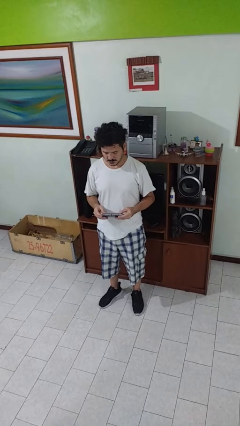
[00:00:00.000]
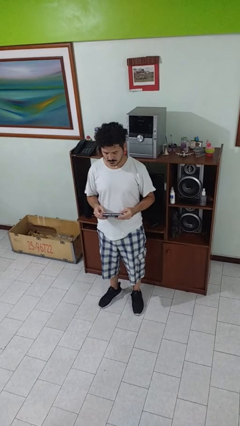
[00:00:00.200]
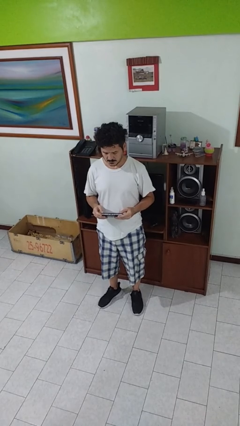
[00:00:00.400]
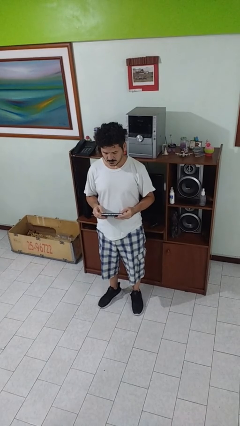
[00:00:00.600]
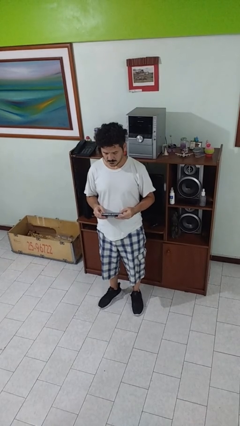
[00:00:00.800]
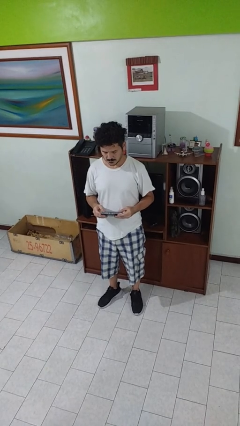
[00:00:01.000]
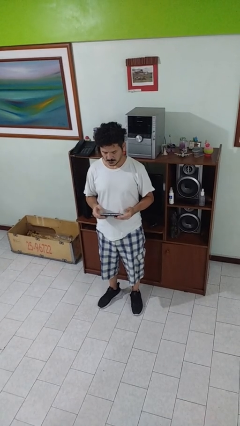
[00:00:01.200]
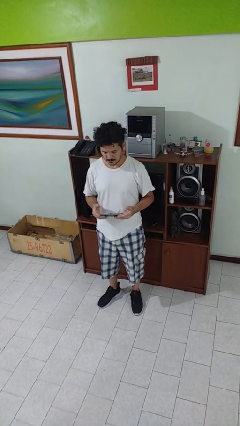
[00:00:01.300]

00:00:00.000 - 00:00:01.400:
person interacts with handheld game

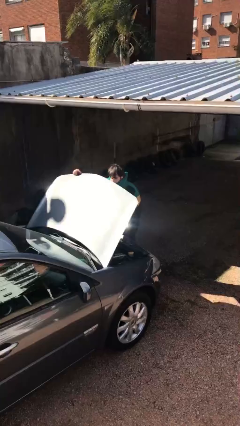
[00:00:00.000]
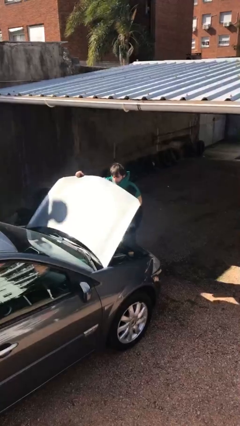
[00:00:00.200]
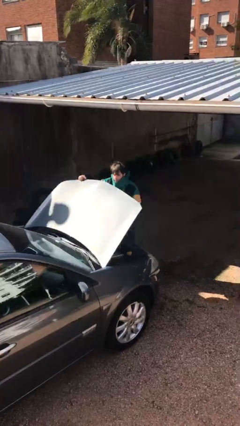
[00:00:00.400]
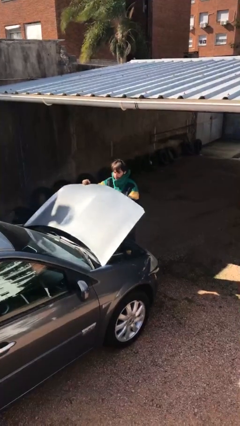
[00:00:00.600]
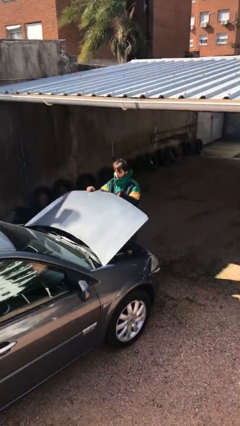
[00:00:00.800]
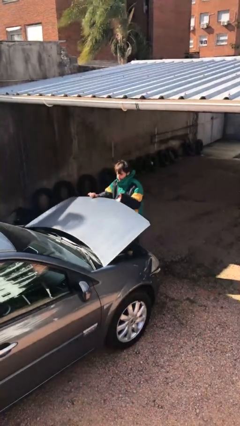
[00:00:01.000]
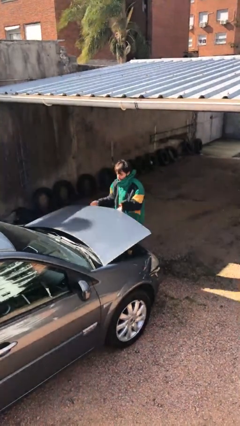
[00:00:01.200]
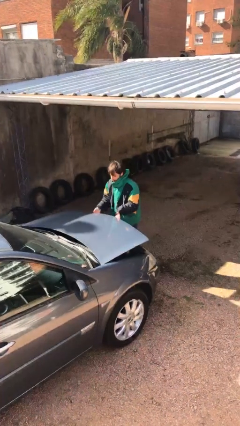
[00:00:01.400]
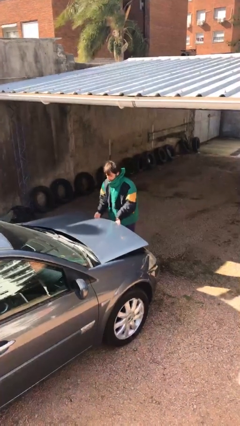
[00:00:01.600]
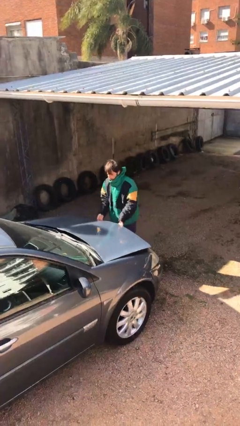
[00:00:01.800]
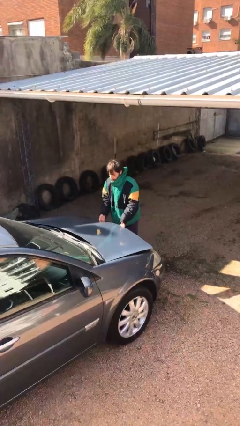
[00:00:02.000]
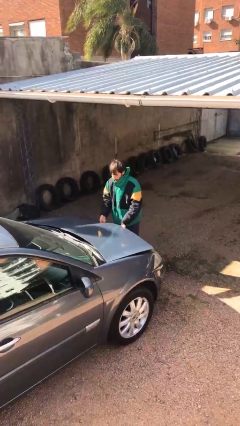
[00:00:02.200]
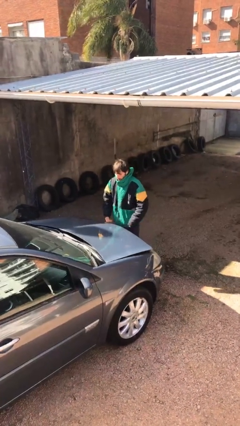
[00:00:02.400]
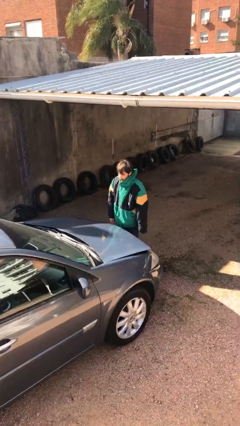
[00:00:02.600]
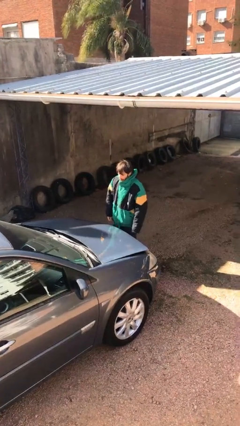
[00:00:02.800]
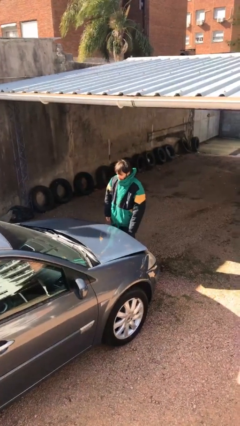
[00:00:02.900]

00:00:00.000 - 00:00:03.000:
person closes car hood

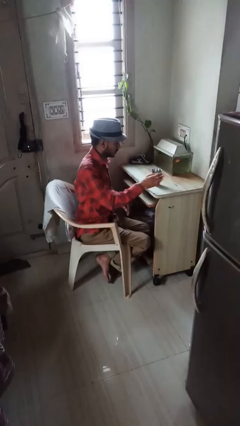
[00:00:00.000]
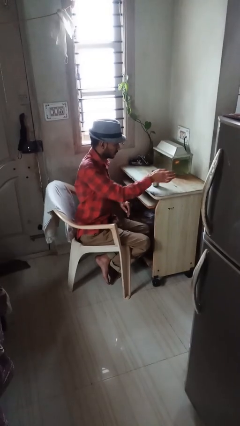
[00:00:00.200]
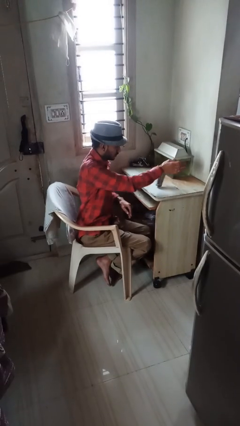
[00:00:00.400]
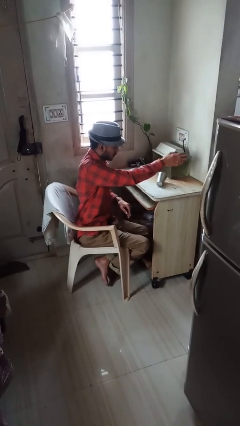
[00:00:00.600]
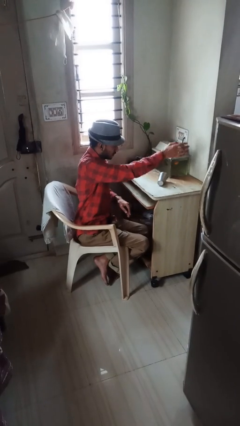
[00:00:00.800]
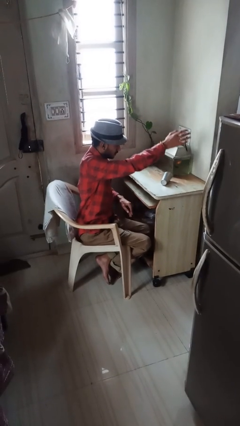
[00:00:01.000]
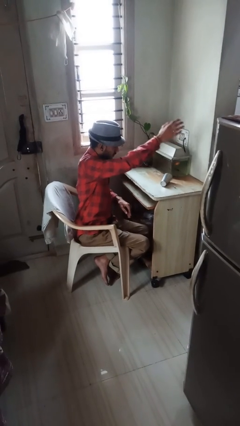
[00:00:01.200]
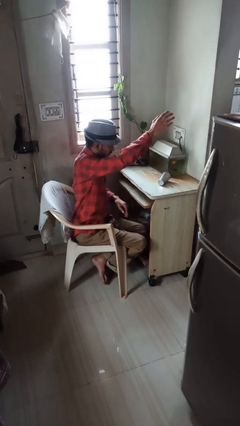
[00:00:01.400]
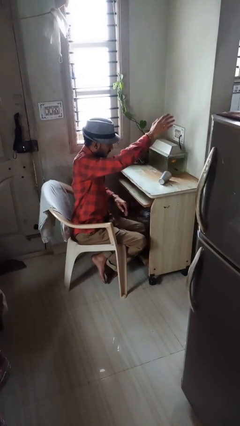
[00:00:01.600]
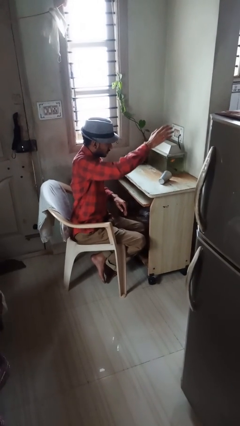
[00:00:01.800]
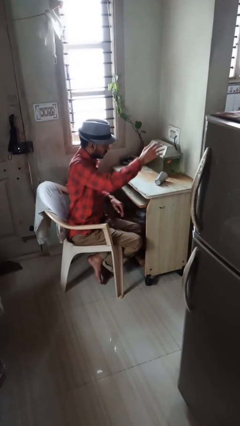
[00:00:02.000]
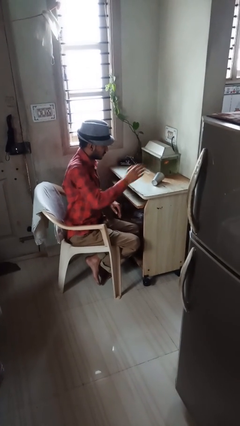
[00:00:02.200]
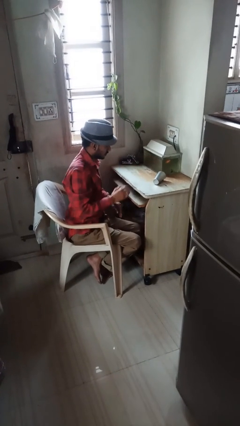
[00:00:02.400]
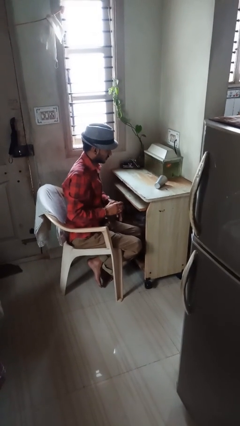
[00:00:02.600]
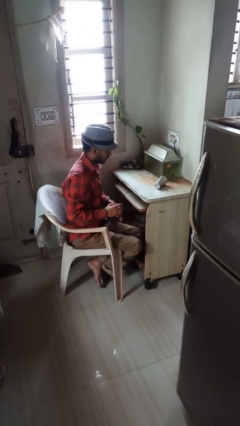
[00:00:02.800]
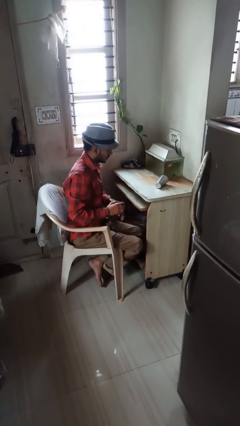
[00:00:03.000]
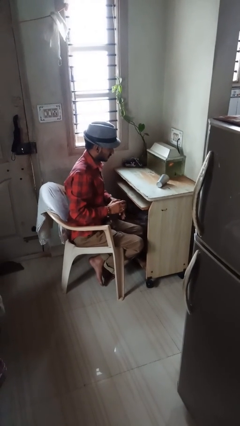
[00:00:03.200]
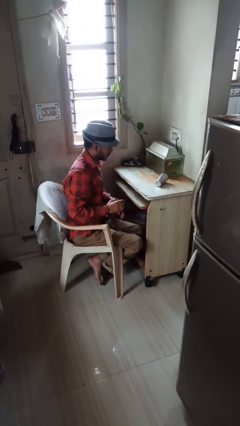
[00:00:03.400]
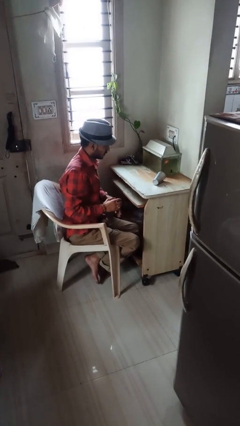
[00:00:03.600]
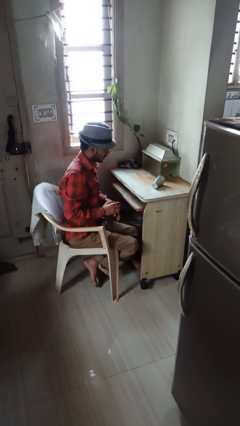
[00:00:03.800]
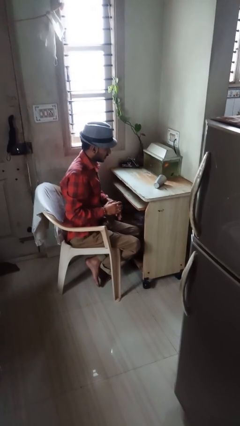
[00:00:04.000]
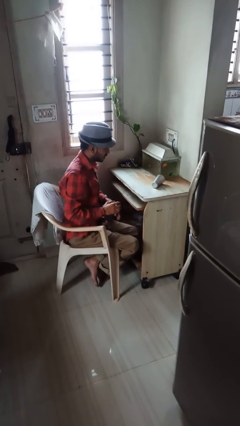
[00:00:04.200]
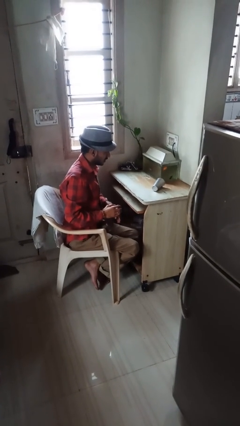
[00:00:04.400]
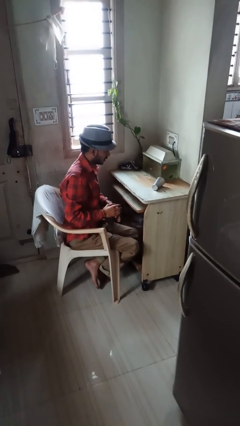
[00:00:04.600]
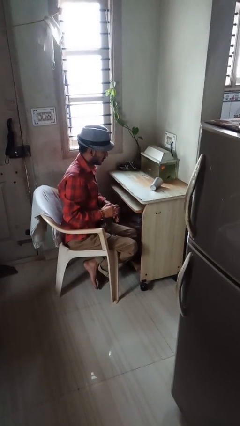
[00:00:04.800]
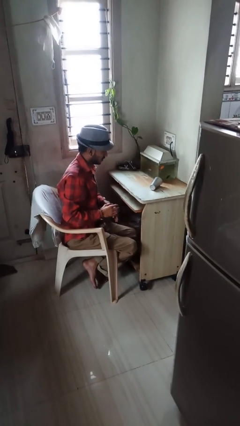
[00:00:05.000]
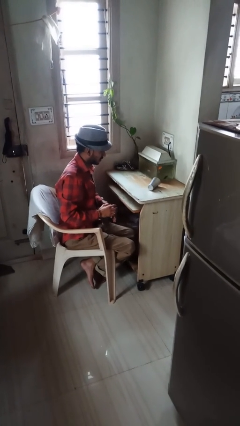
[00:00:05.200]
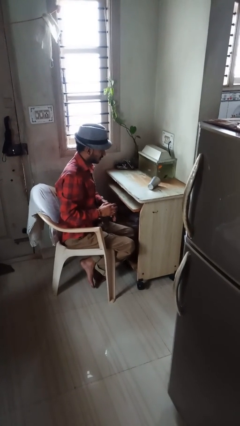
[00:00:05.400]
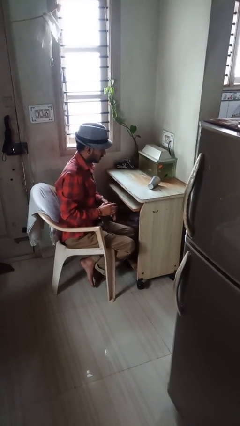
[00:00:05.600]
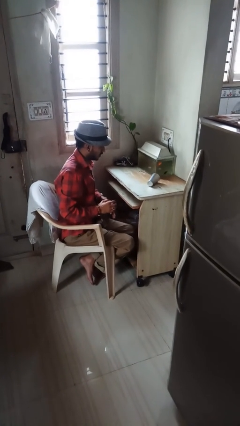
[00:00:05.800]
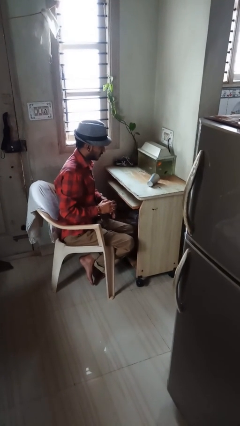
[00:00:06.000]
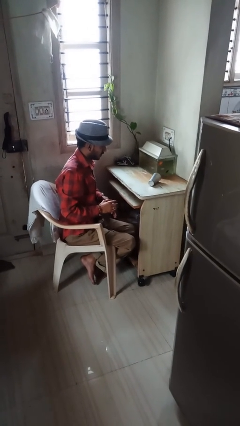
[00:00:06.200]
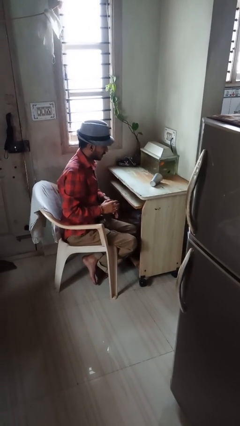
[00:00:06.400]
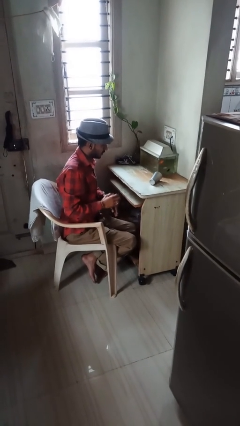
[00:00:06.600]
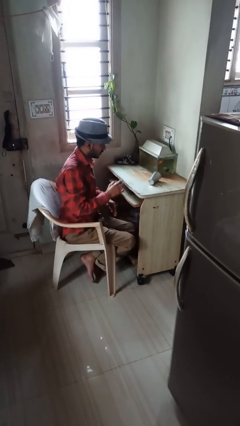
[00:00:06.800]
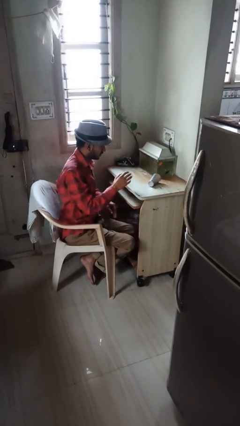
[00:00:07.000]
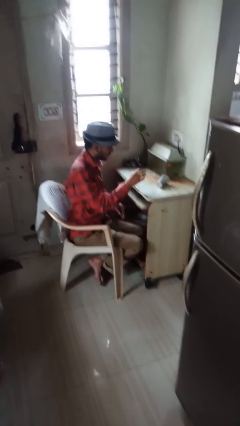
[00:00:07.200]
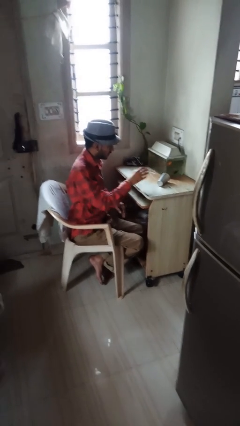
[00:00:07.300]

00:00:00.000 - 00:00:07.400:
person spills on table

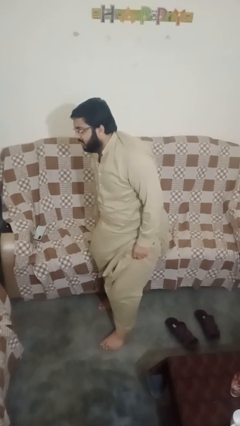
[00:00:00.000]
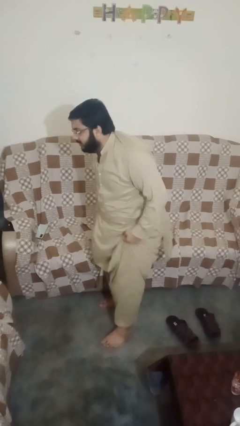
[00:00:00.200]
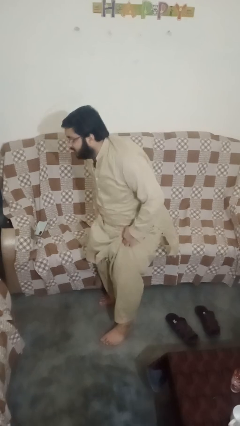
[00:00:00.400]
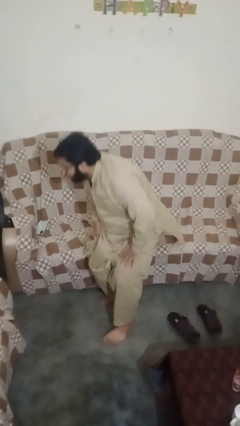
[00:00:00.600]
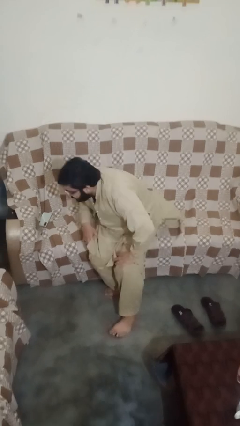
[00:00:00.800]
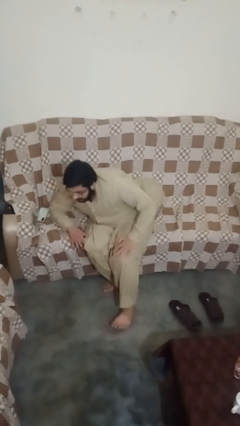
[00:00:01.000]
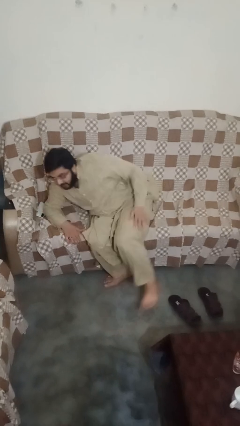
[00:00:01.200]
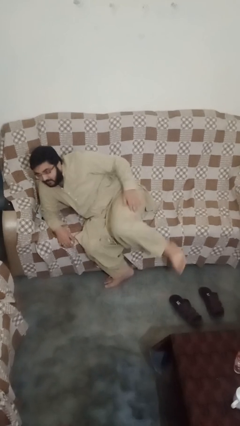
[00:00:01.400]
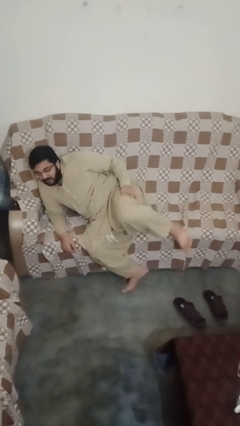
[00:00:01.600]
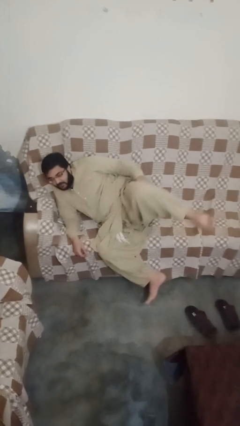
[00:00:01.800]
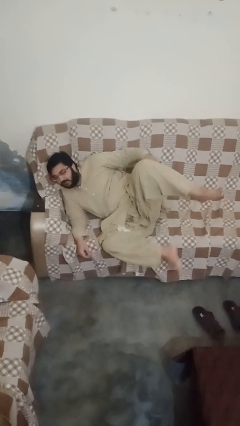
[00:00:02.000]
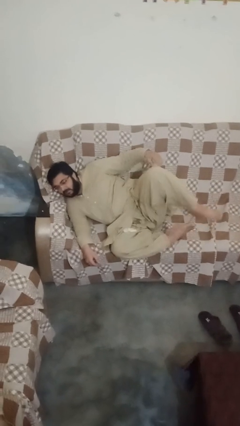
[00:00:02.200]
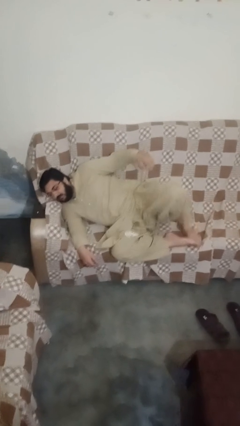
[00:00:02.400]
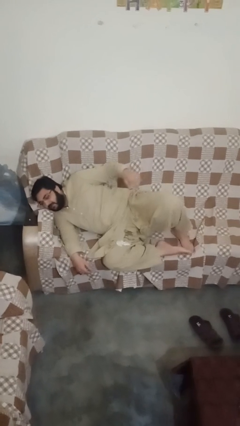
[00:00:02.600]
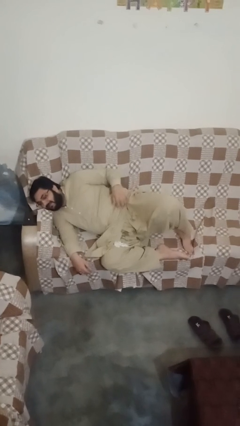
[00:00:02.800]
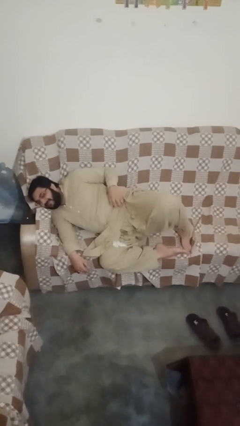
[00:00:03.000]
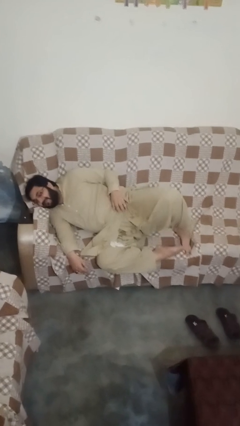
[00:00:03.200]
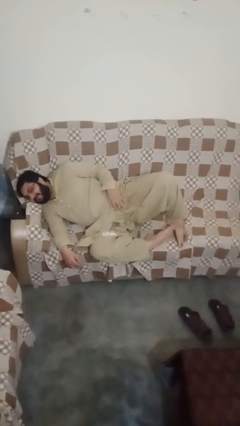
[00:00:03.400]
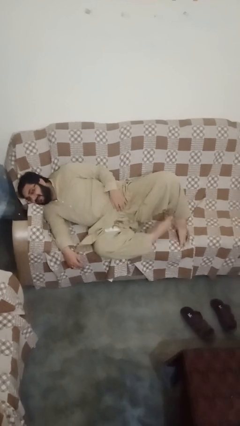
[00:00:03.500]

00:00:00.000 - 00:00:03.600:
person lies down on bed

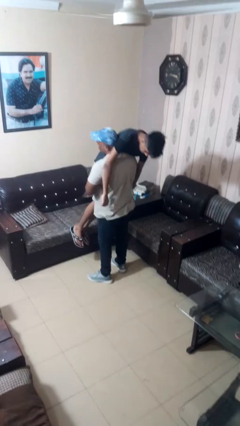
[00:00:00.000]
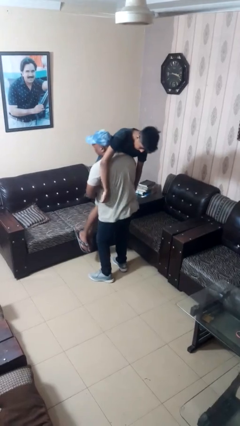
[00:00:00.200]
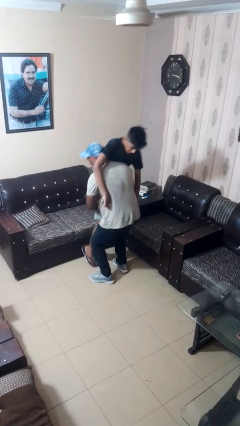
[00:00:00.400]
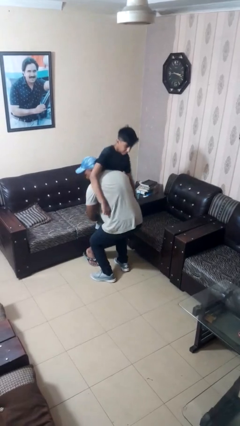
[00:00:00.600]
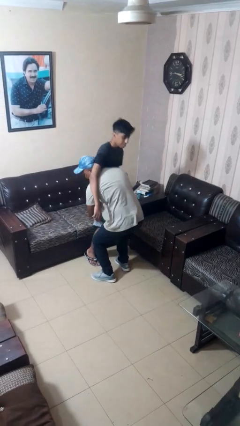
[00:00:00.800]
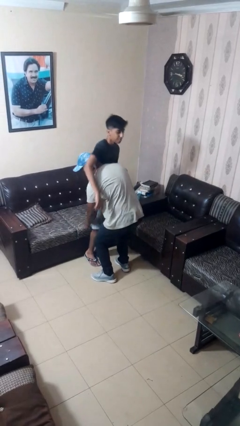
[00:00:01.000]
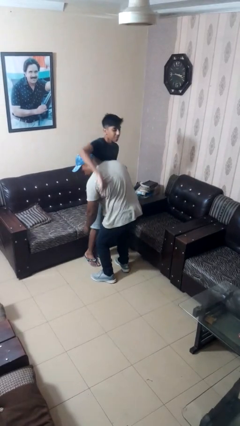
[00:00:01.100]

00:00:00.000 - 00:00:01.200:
person puts down person

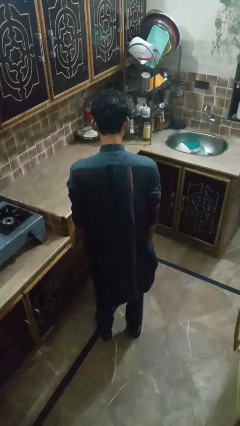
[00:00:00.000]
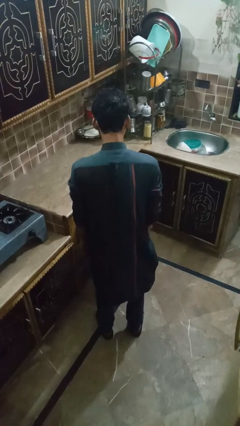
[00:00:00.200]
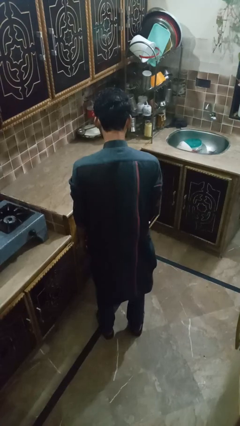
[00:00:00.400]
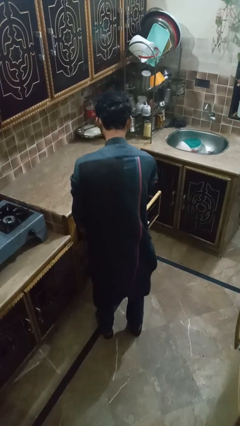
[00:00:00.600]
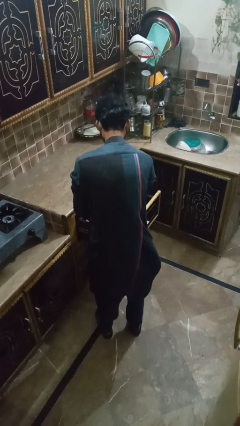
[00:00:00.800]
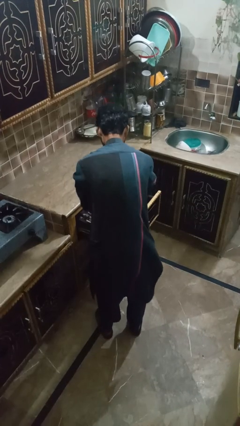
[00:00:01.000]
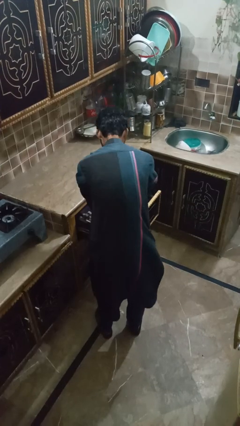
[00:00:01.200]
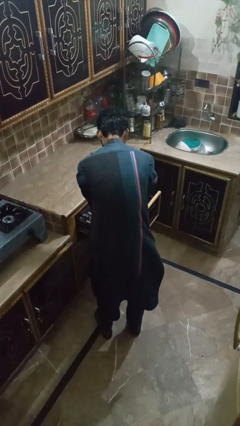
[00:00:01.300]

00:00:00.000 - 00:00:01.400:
person searches in kitchen drawer
